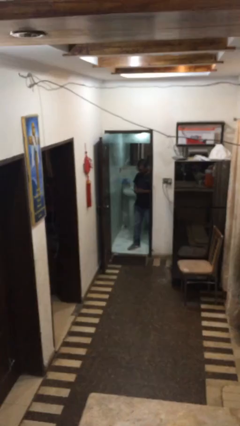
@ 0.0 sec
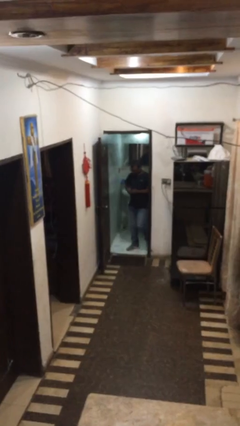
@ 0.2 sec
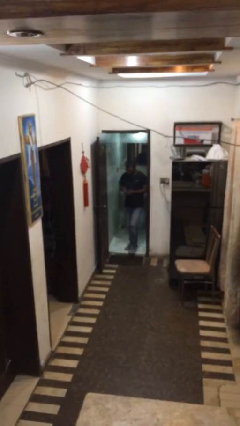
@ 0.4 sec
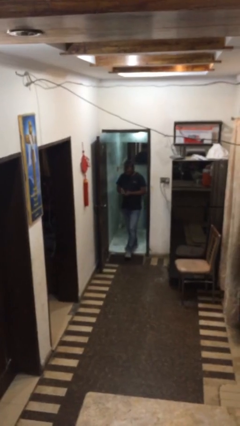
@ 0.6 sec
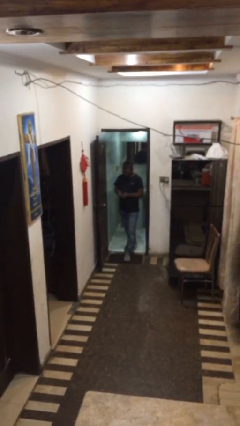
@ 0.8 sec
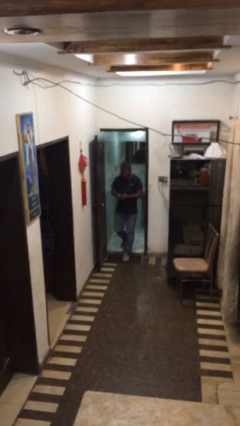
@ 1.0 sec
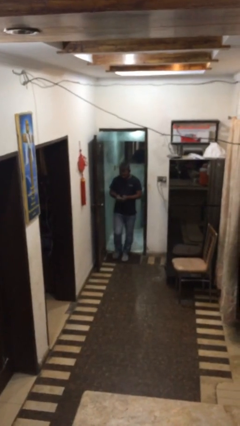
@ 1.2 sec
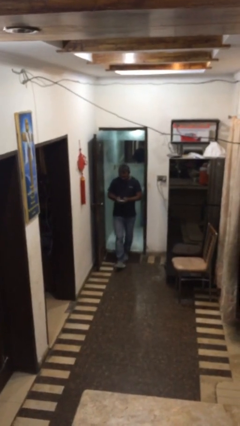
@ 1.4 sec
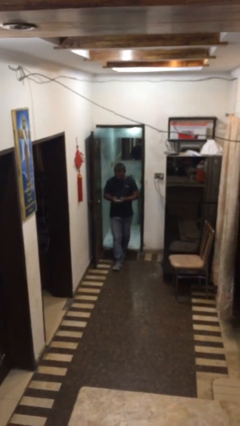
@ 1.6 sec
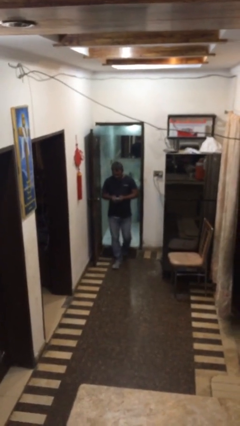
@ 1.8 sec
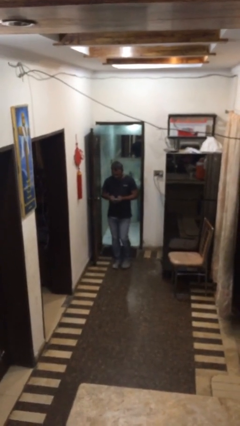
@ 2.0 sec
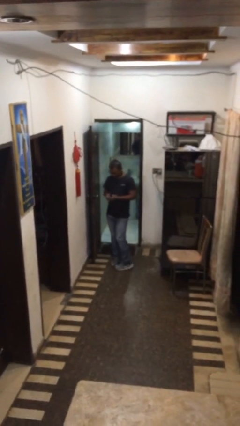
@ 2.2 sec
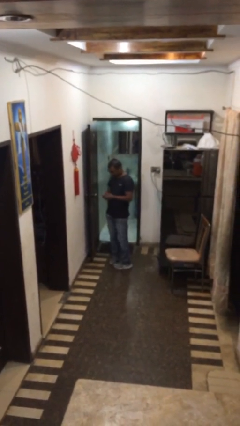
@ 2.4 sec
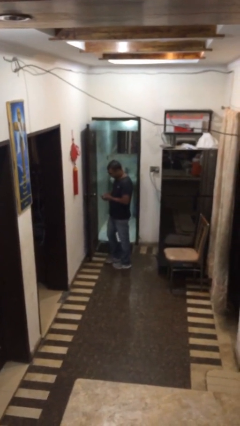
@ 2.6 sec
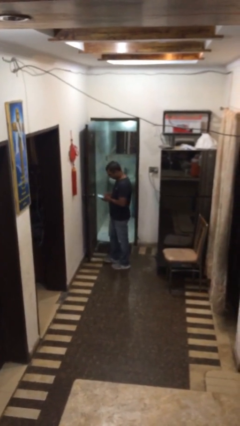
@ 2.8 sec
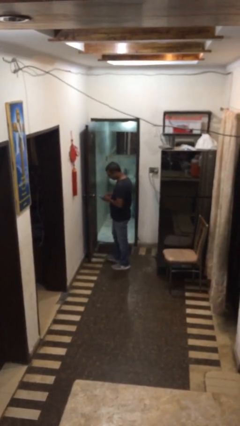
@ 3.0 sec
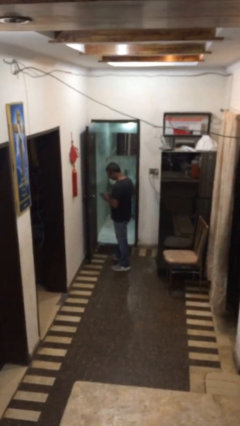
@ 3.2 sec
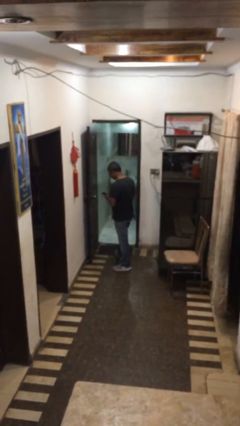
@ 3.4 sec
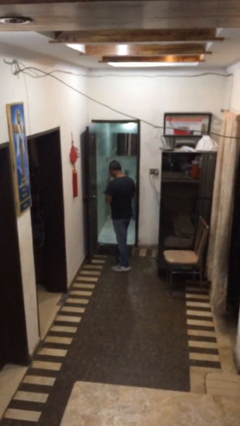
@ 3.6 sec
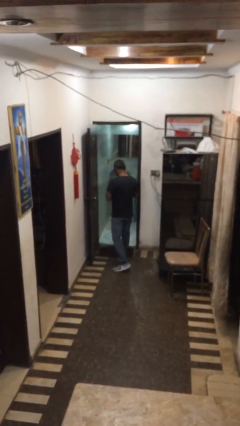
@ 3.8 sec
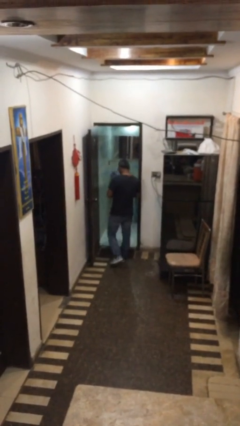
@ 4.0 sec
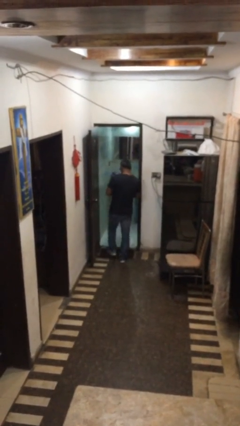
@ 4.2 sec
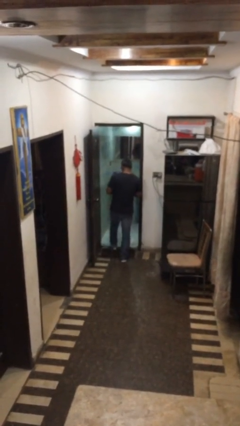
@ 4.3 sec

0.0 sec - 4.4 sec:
person enters scene through structure

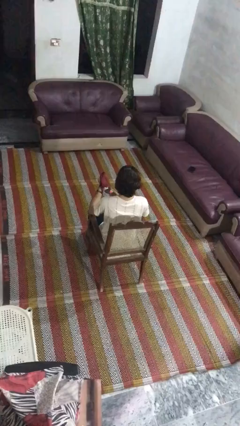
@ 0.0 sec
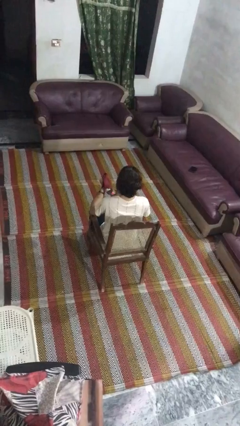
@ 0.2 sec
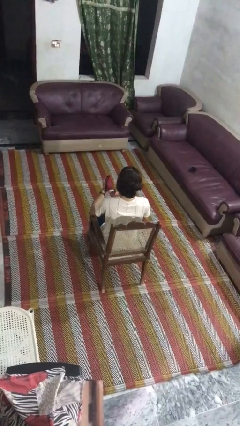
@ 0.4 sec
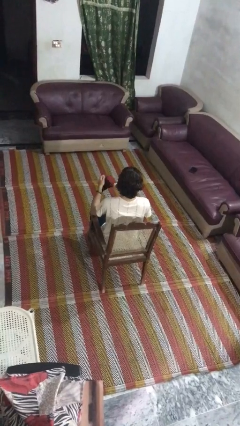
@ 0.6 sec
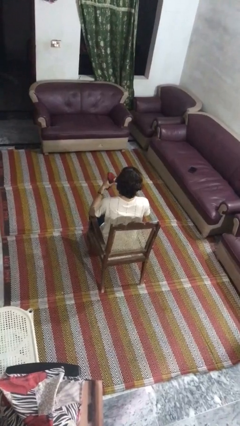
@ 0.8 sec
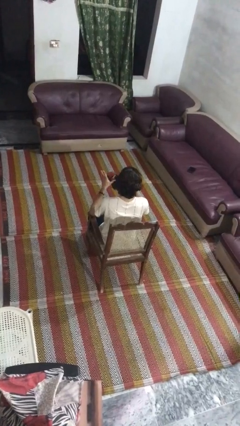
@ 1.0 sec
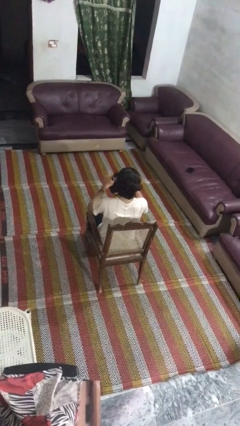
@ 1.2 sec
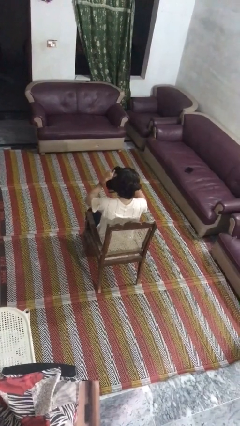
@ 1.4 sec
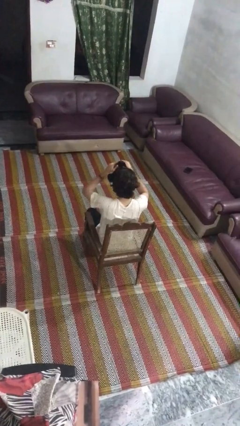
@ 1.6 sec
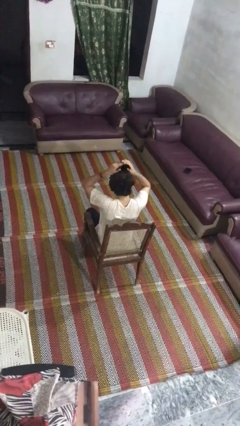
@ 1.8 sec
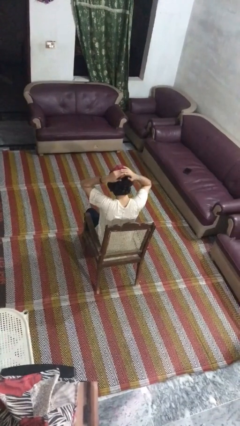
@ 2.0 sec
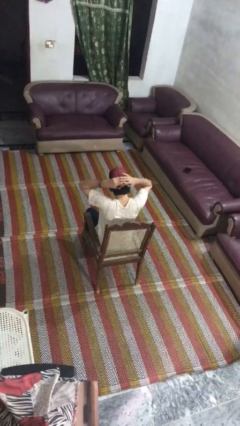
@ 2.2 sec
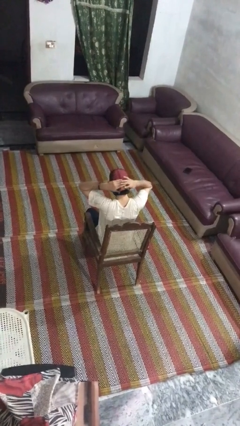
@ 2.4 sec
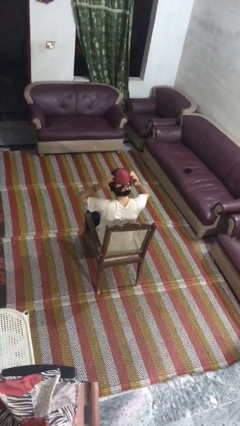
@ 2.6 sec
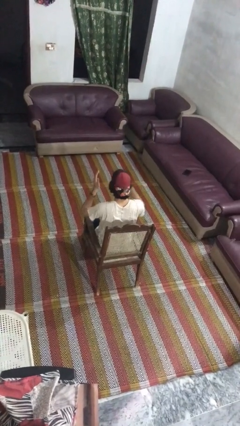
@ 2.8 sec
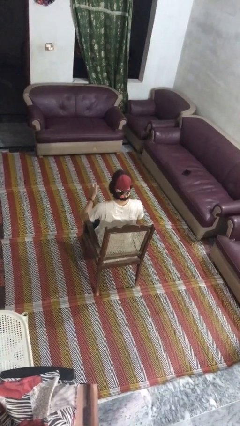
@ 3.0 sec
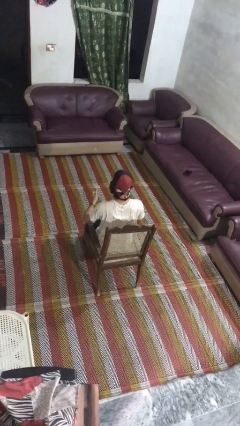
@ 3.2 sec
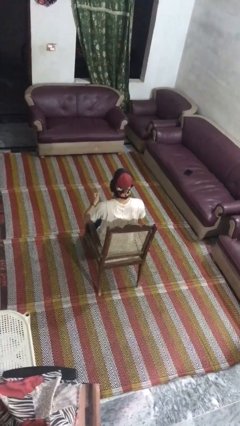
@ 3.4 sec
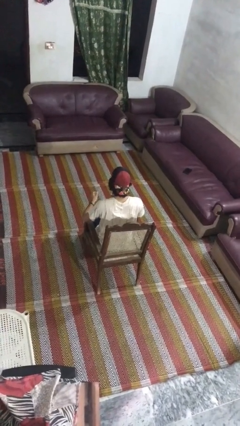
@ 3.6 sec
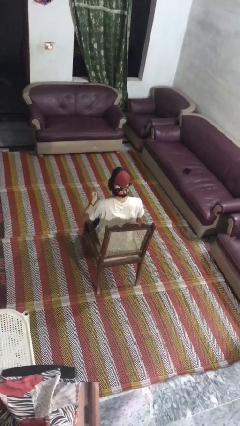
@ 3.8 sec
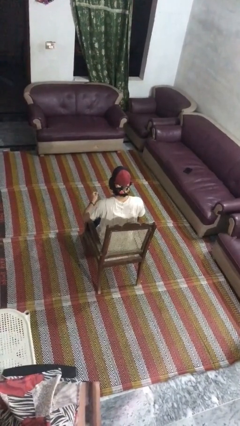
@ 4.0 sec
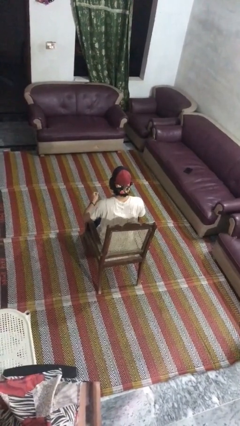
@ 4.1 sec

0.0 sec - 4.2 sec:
person puts on hat

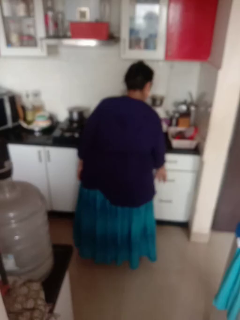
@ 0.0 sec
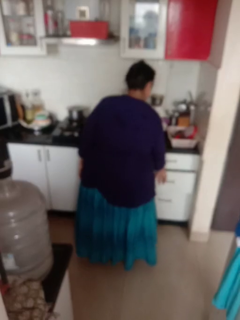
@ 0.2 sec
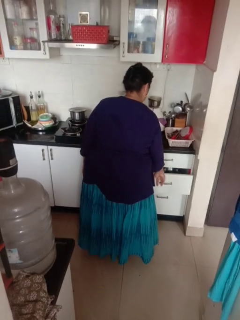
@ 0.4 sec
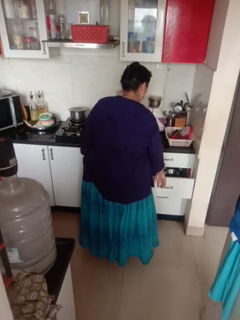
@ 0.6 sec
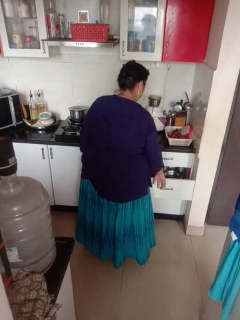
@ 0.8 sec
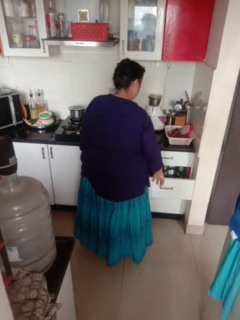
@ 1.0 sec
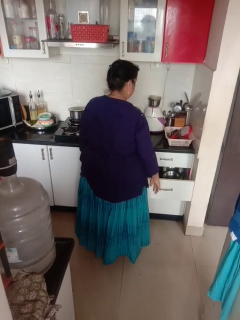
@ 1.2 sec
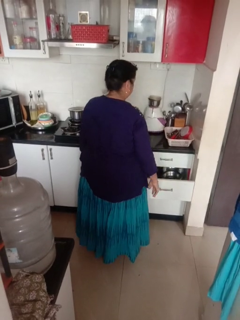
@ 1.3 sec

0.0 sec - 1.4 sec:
person opens kitchen drawer

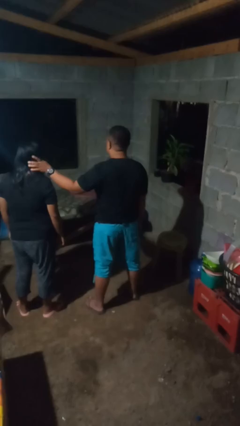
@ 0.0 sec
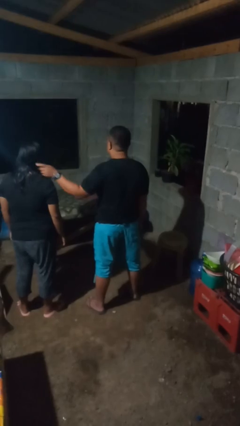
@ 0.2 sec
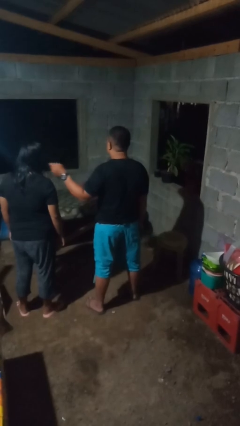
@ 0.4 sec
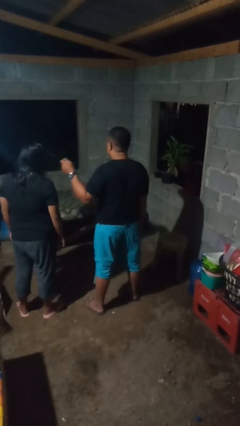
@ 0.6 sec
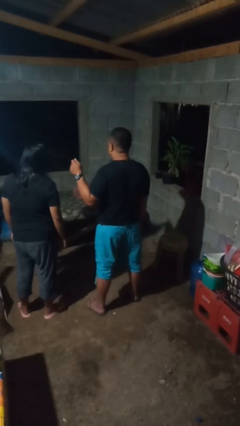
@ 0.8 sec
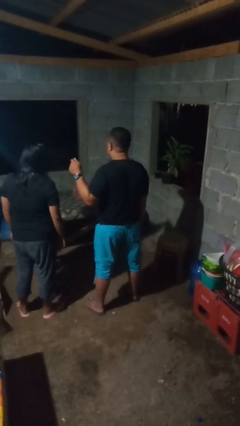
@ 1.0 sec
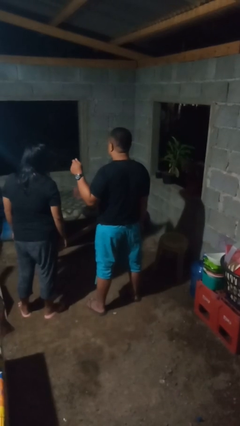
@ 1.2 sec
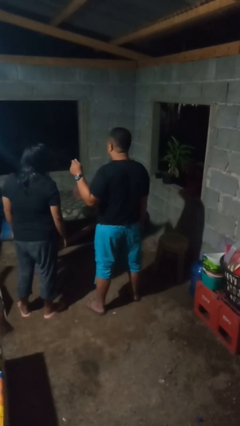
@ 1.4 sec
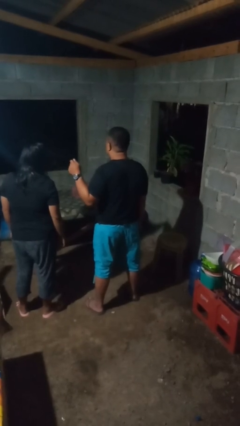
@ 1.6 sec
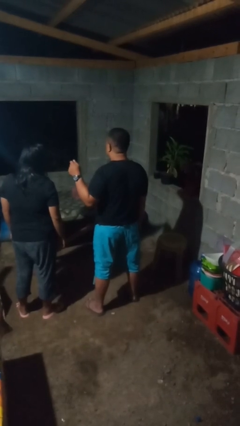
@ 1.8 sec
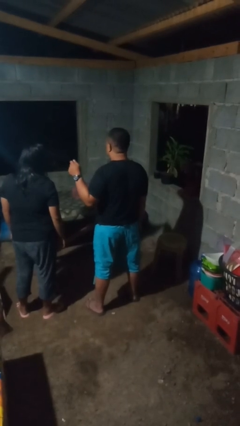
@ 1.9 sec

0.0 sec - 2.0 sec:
person grabs person by hair

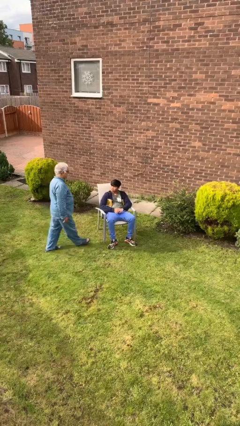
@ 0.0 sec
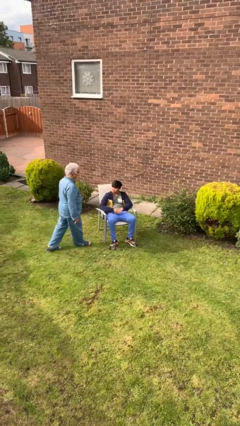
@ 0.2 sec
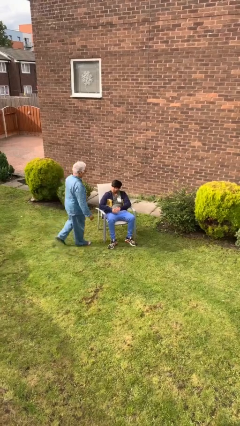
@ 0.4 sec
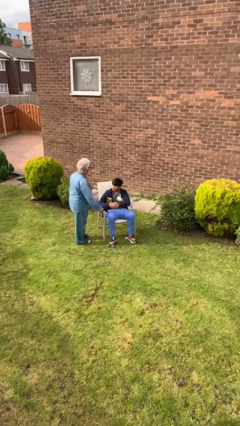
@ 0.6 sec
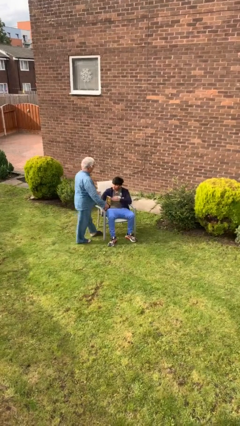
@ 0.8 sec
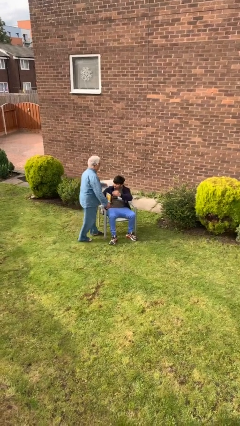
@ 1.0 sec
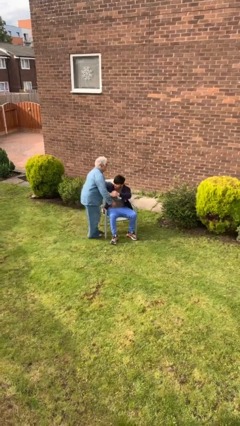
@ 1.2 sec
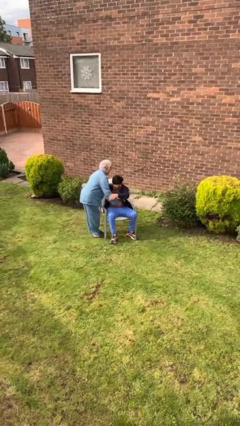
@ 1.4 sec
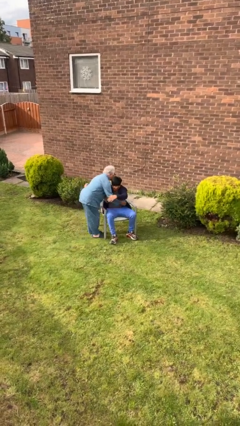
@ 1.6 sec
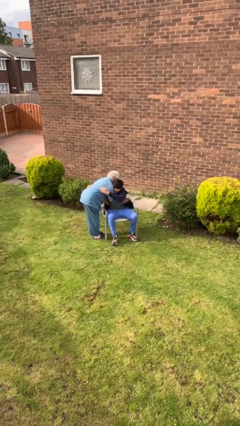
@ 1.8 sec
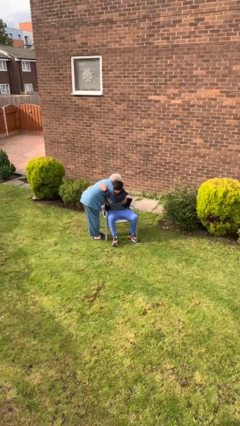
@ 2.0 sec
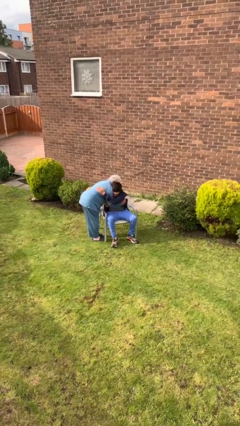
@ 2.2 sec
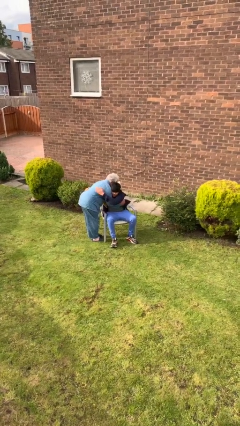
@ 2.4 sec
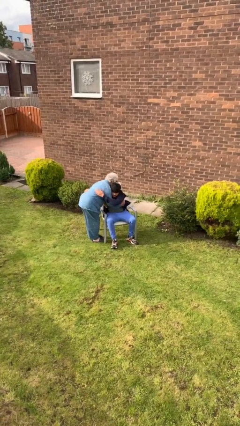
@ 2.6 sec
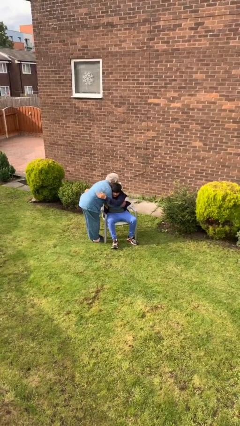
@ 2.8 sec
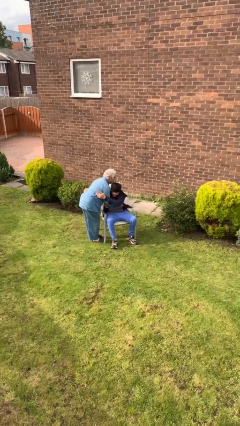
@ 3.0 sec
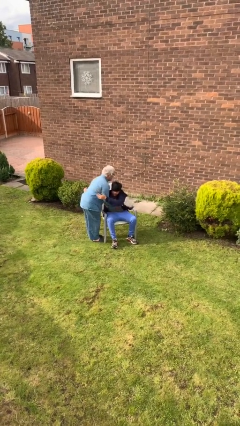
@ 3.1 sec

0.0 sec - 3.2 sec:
person embraces person

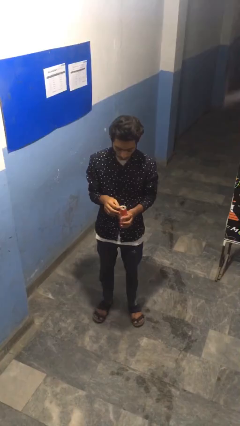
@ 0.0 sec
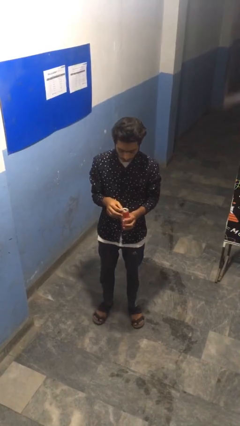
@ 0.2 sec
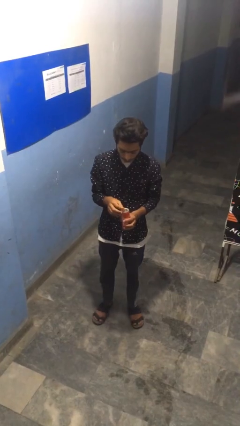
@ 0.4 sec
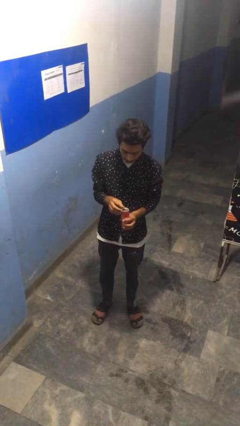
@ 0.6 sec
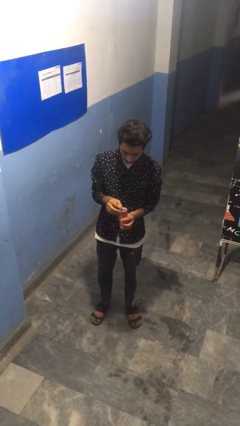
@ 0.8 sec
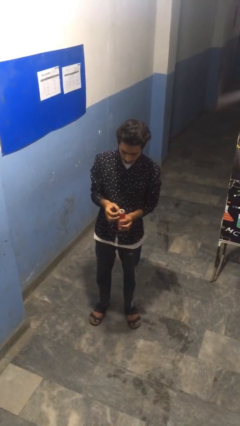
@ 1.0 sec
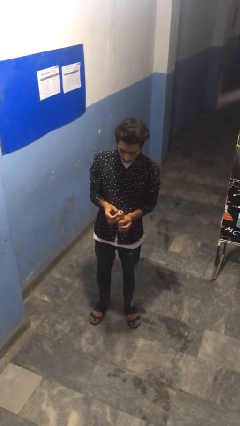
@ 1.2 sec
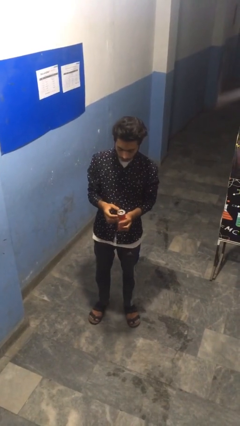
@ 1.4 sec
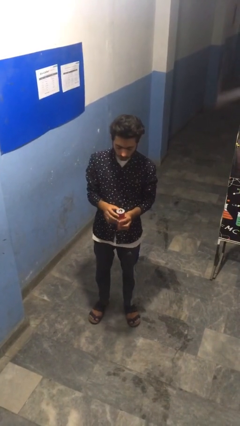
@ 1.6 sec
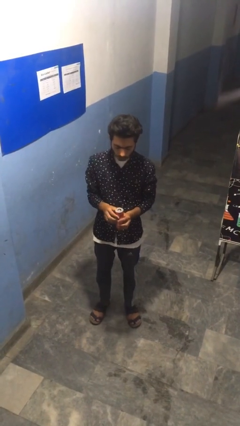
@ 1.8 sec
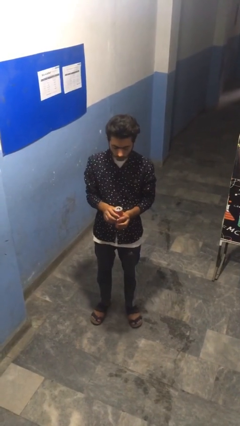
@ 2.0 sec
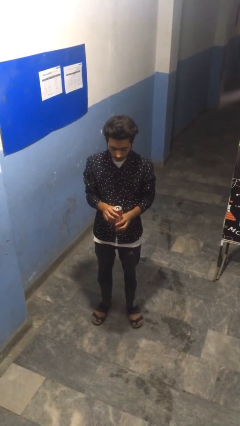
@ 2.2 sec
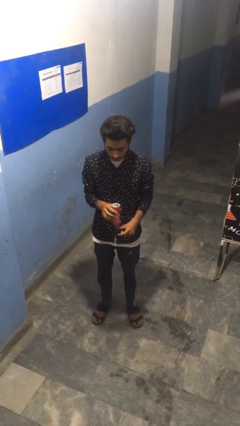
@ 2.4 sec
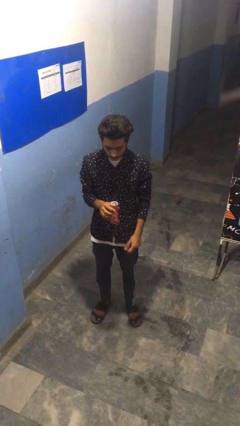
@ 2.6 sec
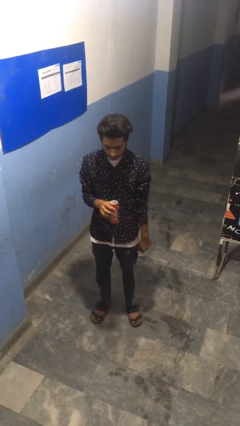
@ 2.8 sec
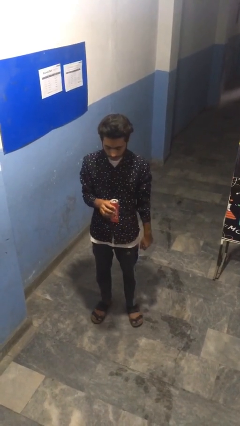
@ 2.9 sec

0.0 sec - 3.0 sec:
person opens beverage can
